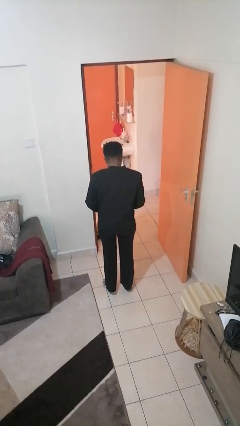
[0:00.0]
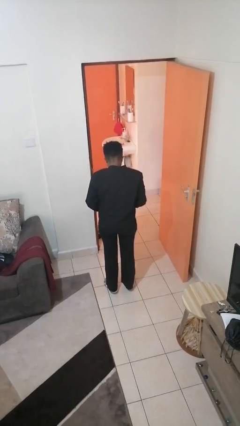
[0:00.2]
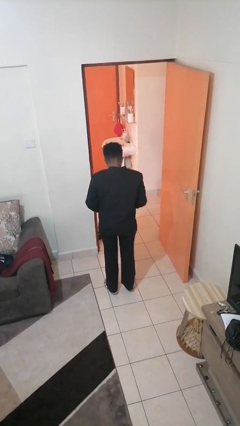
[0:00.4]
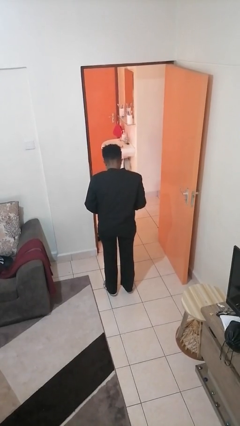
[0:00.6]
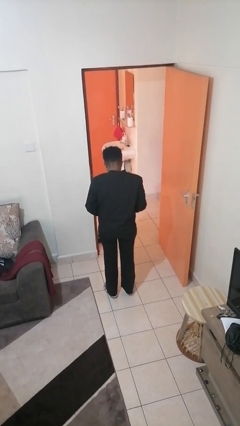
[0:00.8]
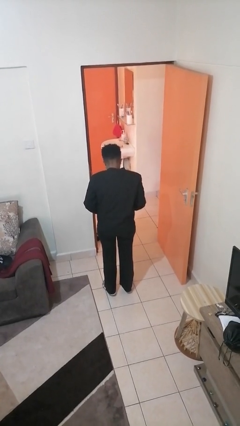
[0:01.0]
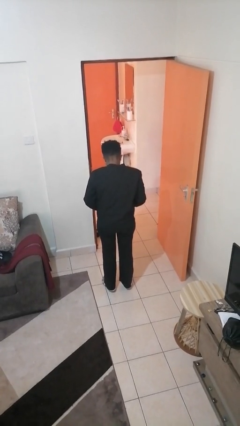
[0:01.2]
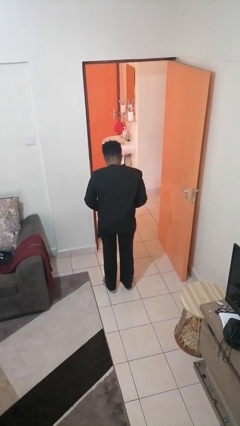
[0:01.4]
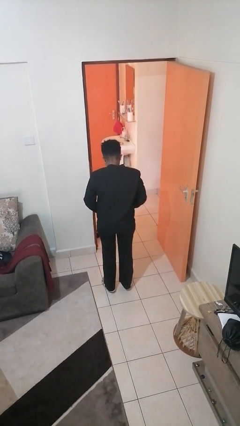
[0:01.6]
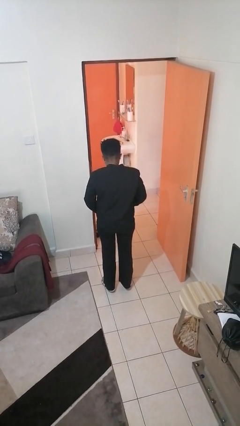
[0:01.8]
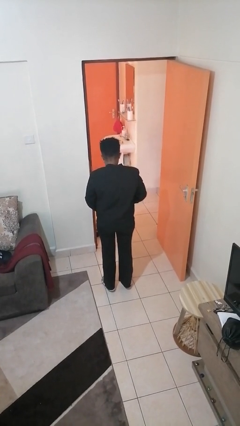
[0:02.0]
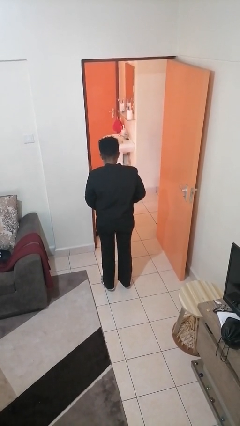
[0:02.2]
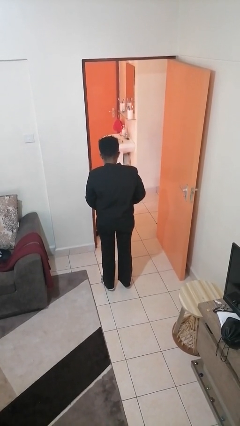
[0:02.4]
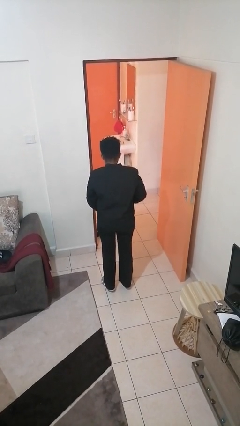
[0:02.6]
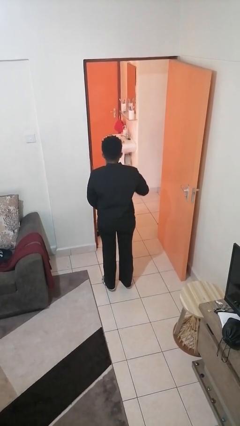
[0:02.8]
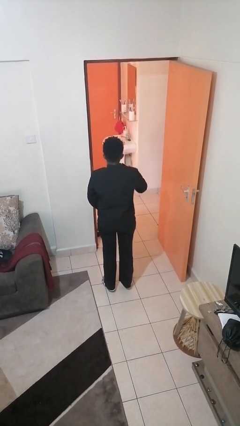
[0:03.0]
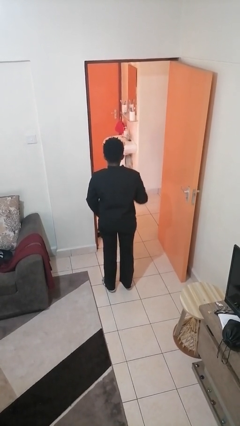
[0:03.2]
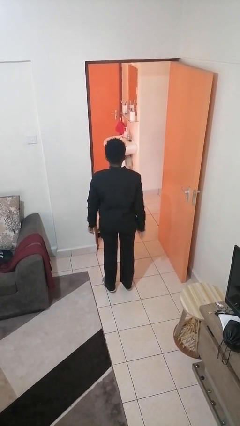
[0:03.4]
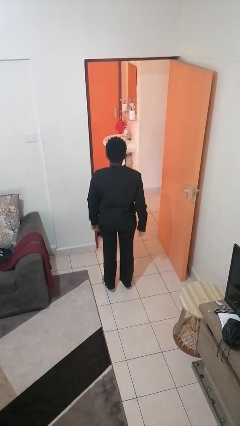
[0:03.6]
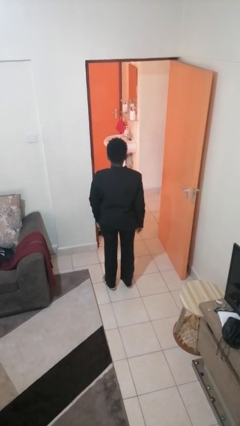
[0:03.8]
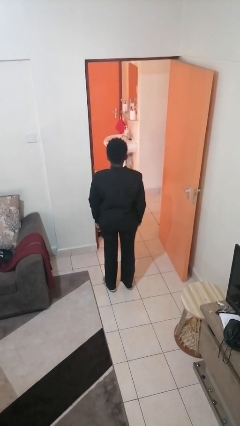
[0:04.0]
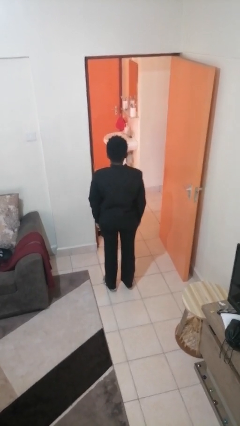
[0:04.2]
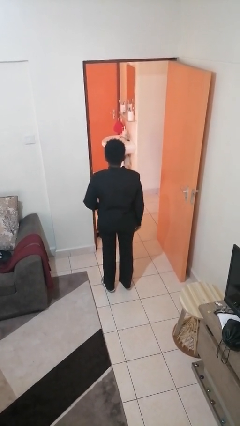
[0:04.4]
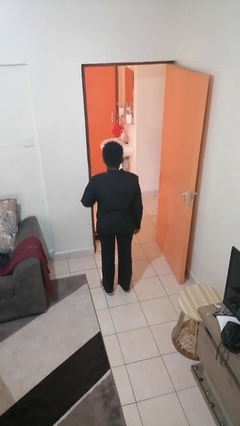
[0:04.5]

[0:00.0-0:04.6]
person zips up jacket

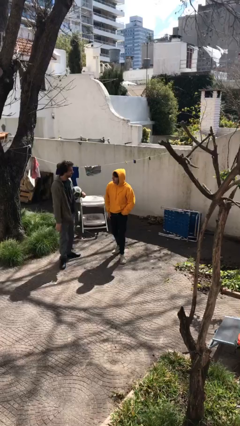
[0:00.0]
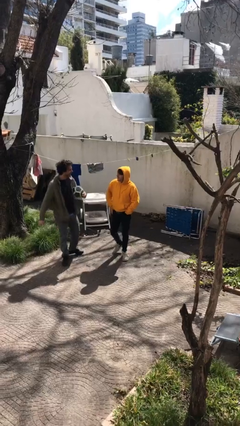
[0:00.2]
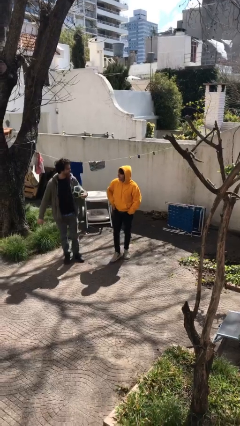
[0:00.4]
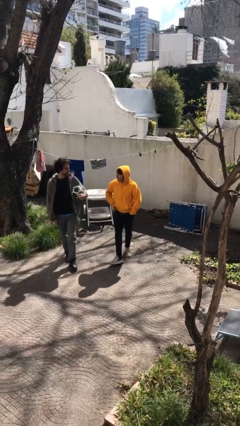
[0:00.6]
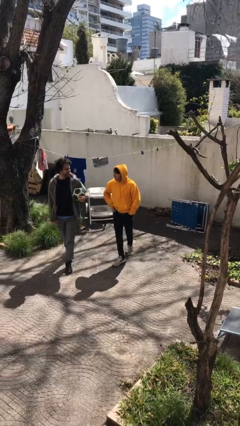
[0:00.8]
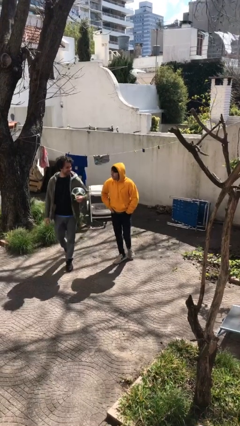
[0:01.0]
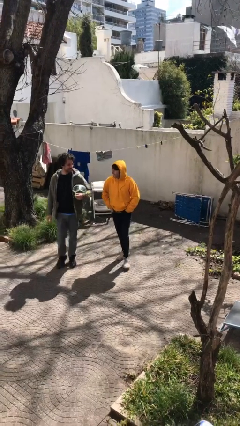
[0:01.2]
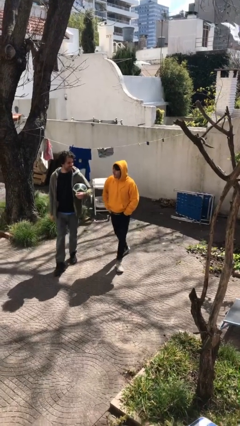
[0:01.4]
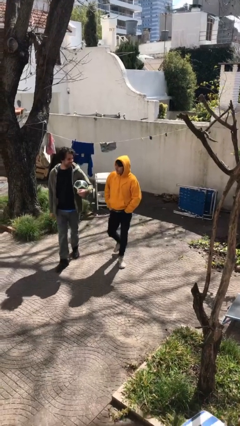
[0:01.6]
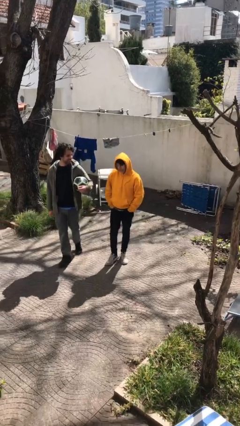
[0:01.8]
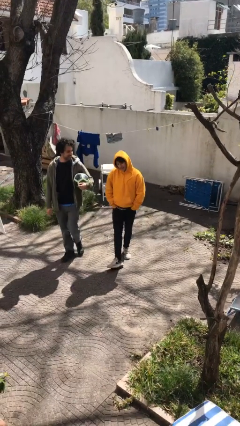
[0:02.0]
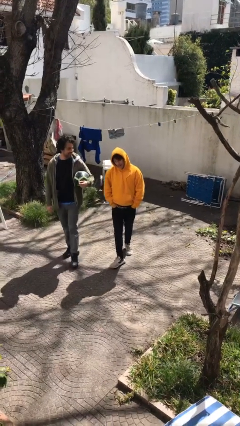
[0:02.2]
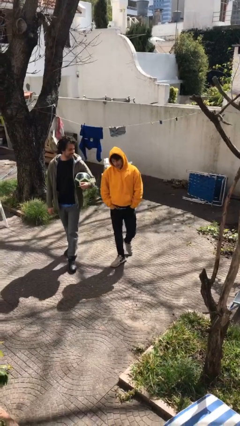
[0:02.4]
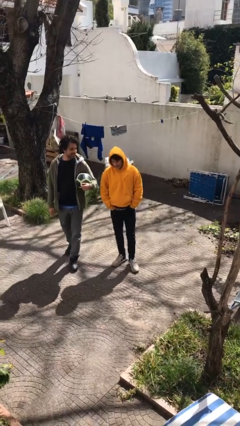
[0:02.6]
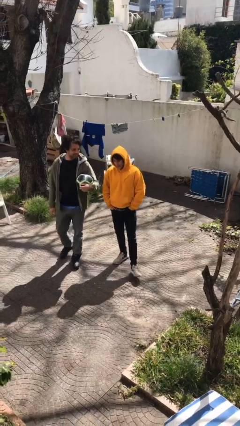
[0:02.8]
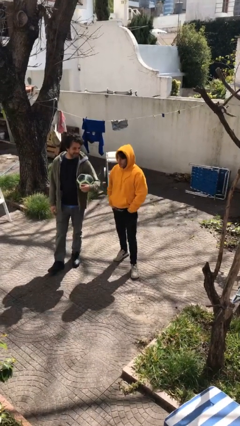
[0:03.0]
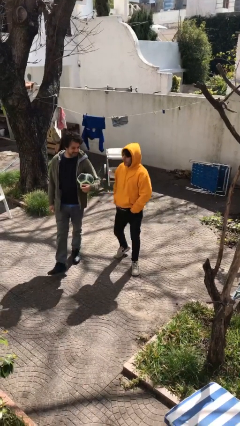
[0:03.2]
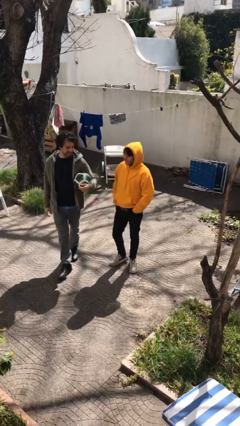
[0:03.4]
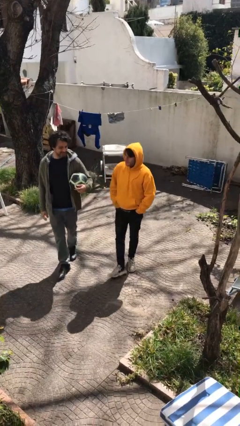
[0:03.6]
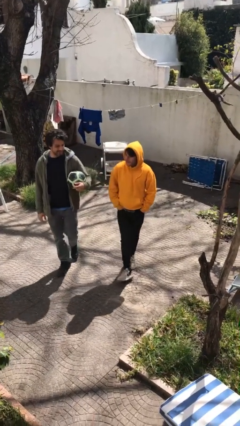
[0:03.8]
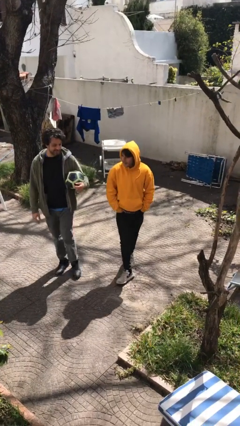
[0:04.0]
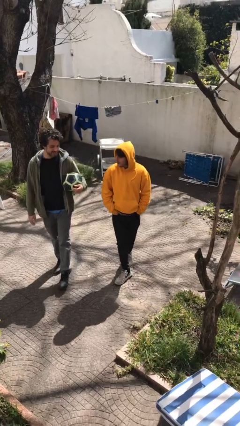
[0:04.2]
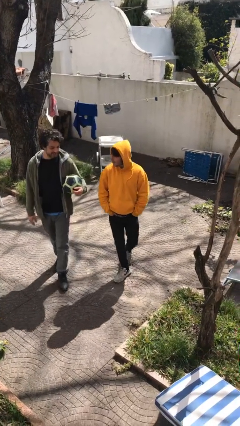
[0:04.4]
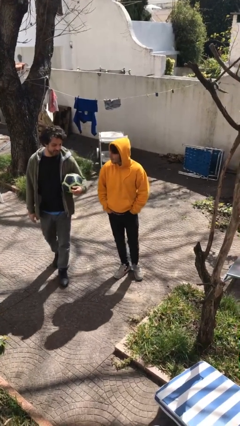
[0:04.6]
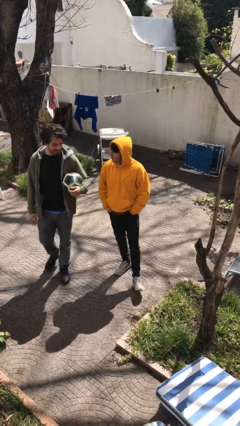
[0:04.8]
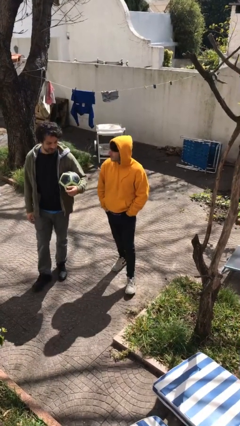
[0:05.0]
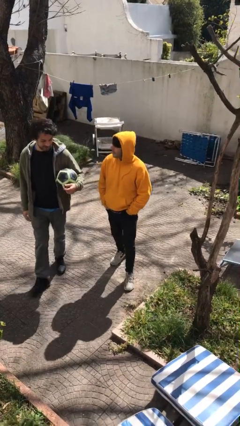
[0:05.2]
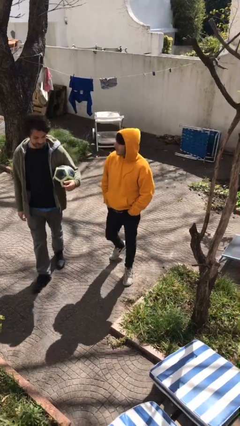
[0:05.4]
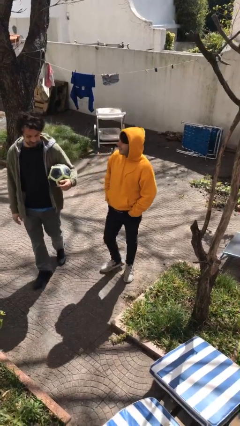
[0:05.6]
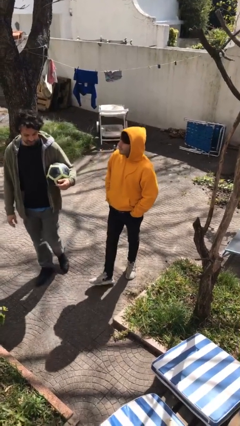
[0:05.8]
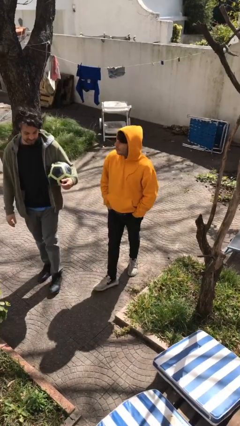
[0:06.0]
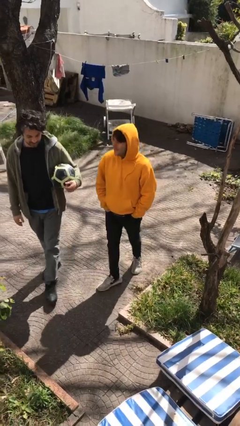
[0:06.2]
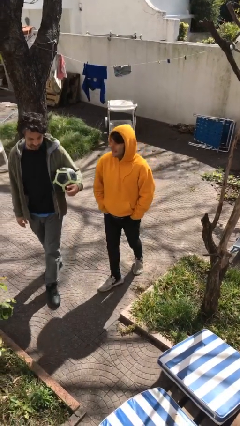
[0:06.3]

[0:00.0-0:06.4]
person talks to person

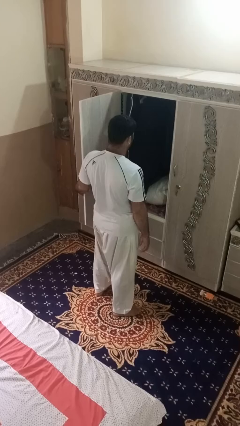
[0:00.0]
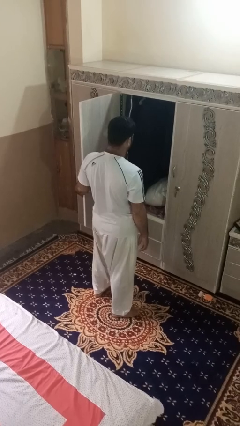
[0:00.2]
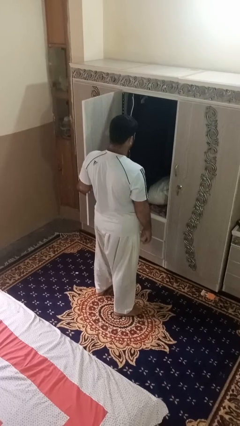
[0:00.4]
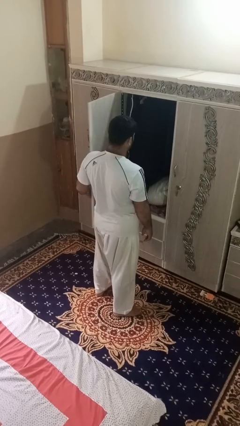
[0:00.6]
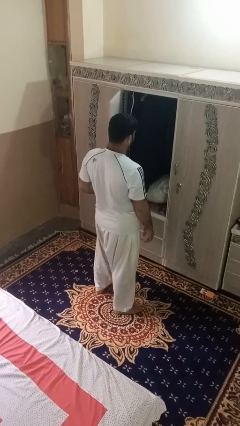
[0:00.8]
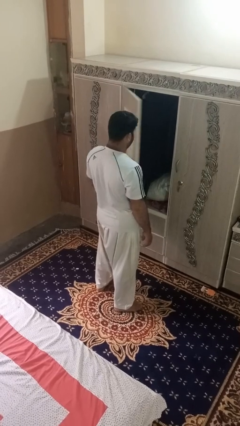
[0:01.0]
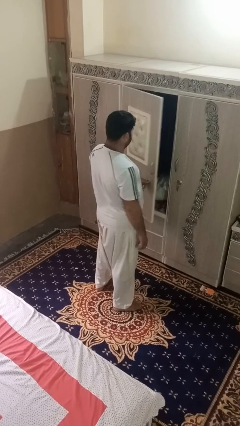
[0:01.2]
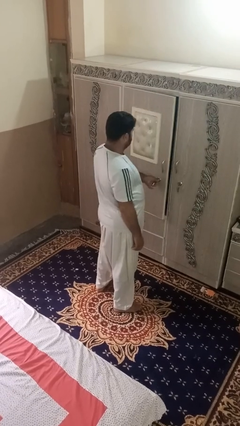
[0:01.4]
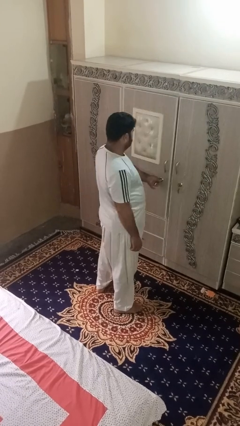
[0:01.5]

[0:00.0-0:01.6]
person closes dresser drawer

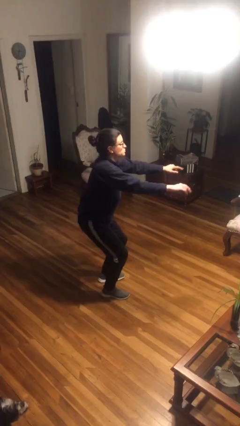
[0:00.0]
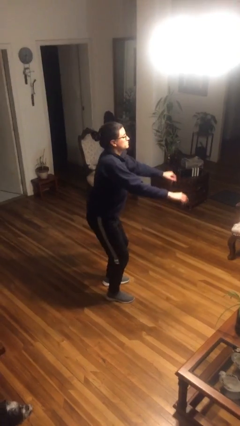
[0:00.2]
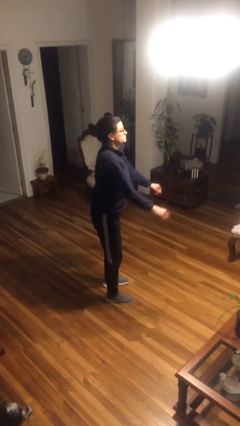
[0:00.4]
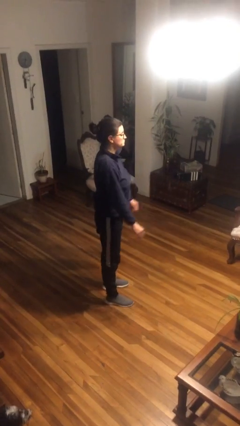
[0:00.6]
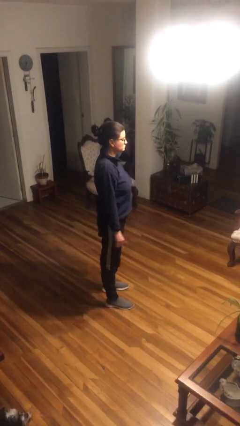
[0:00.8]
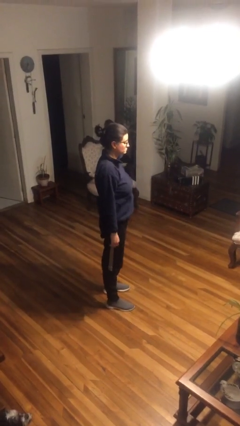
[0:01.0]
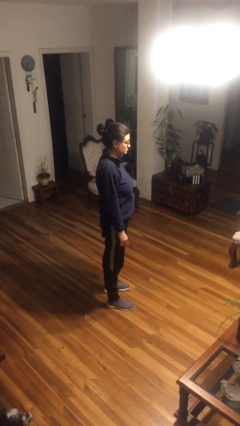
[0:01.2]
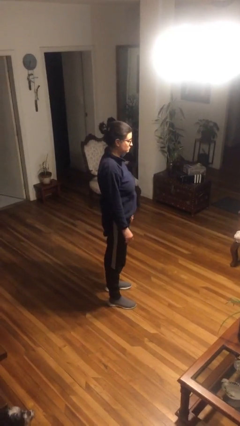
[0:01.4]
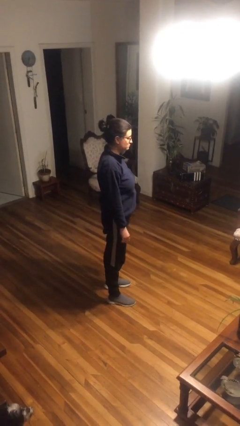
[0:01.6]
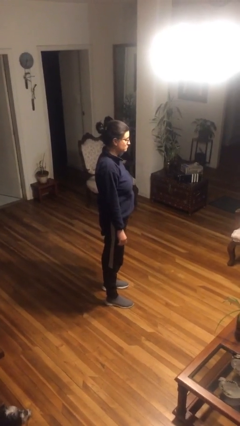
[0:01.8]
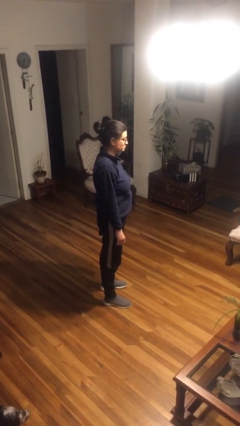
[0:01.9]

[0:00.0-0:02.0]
person stands up

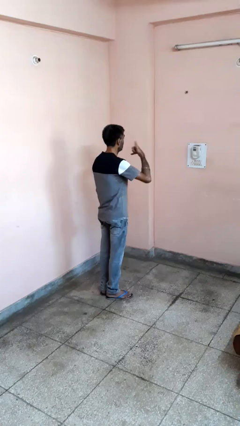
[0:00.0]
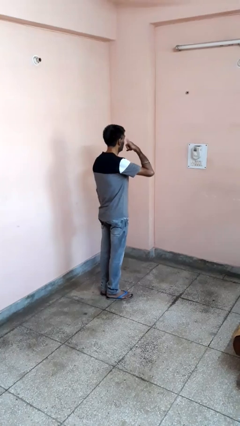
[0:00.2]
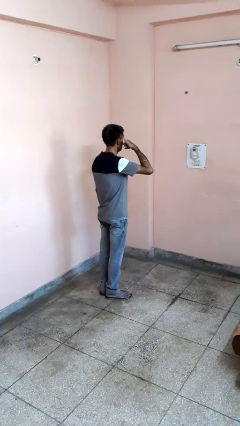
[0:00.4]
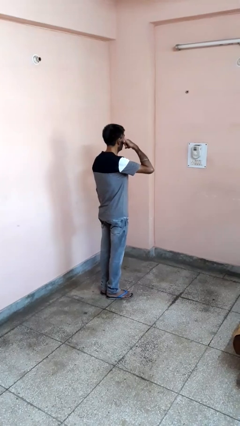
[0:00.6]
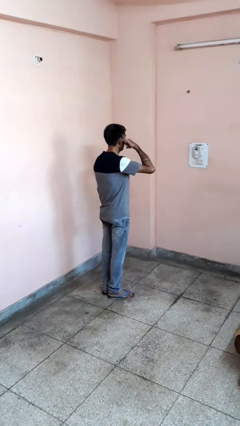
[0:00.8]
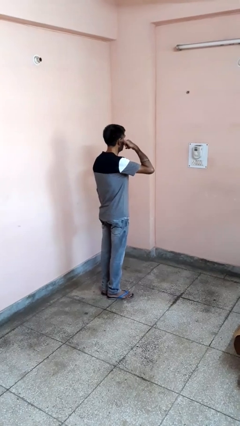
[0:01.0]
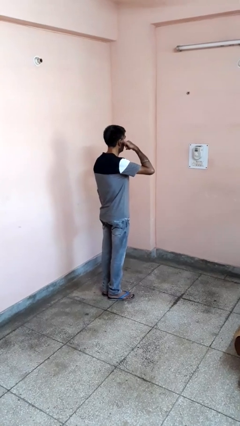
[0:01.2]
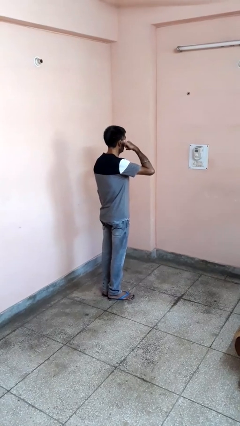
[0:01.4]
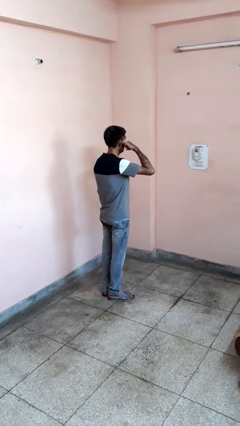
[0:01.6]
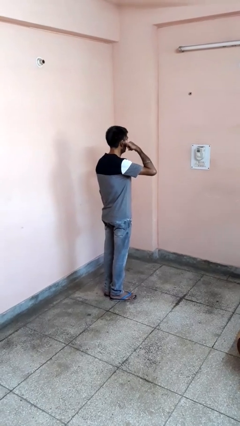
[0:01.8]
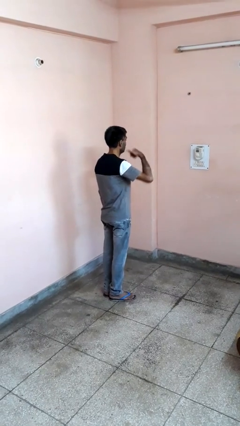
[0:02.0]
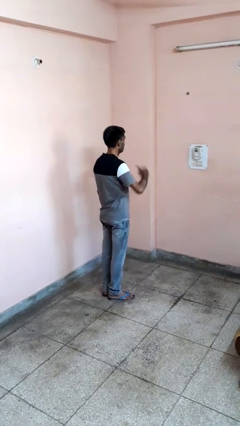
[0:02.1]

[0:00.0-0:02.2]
person gestures call me

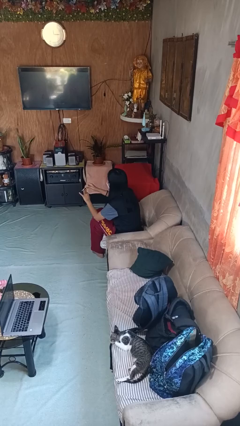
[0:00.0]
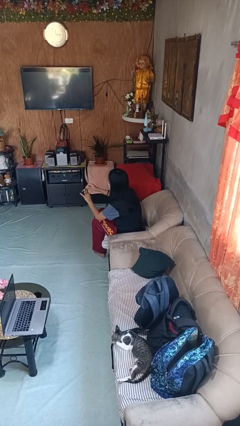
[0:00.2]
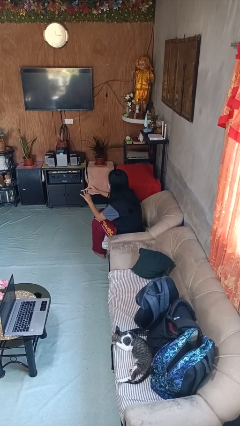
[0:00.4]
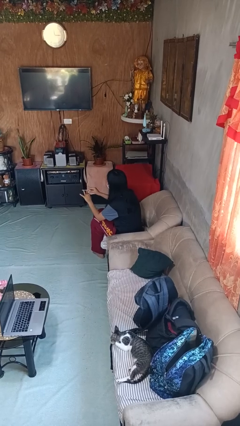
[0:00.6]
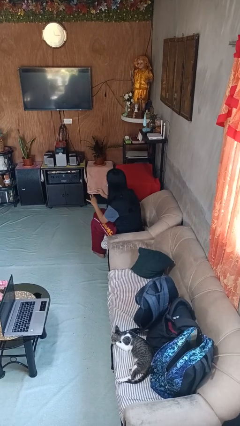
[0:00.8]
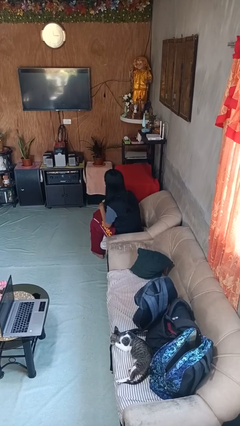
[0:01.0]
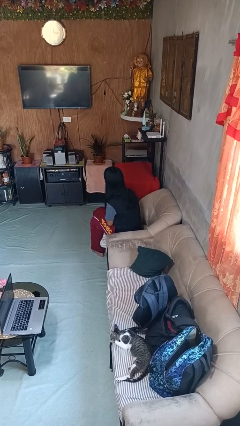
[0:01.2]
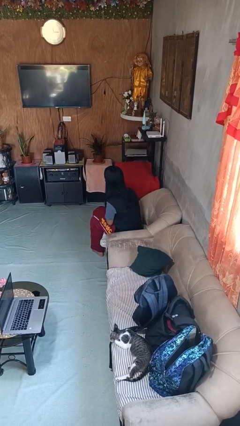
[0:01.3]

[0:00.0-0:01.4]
person files fingernails
